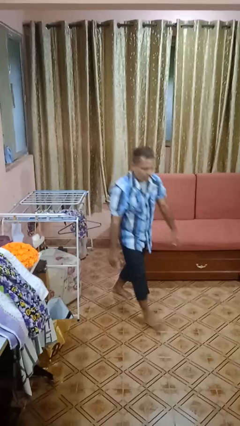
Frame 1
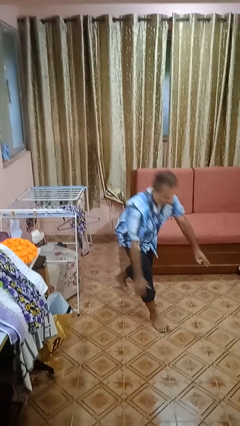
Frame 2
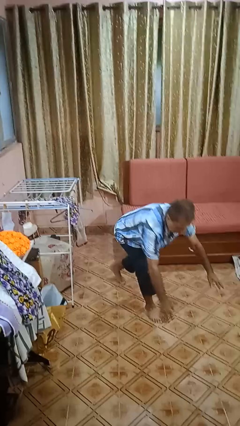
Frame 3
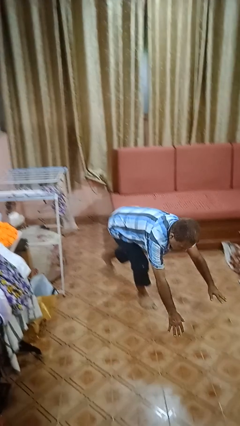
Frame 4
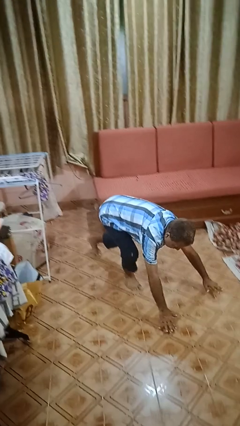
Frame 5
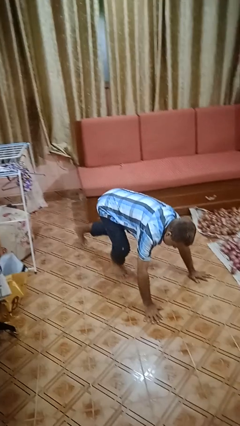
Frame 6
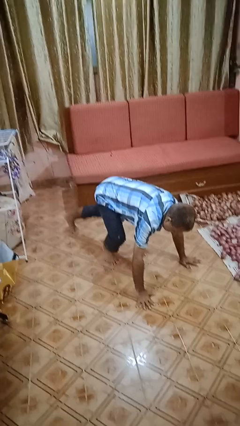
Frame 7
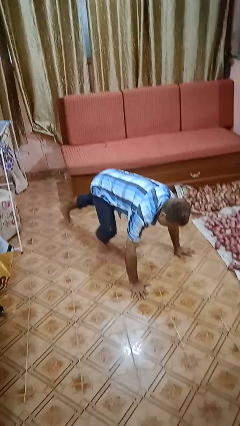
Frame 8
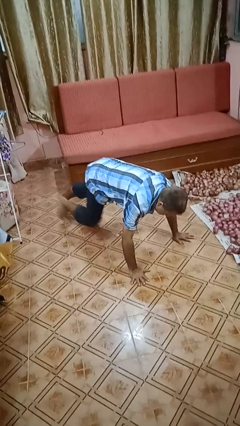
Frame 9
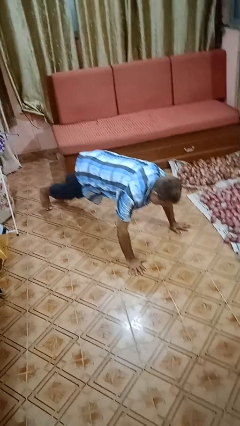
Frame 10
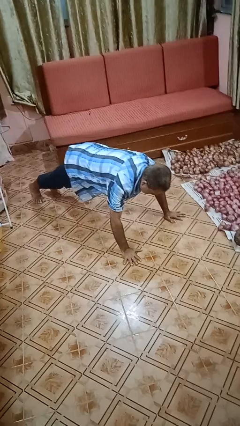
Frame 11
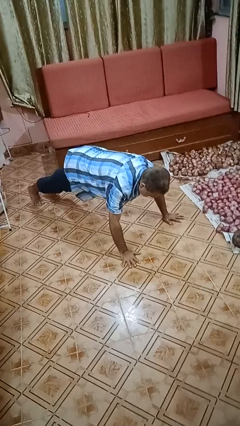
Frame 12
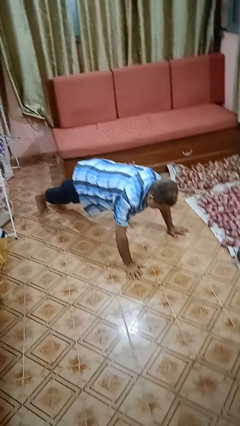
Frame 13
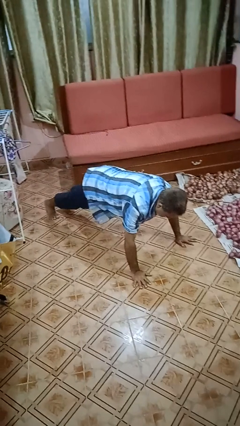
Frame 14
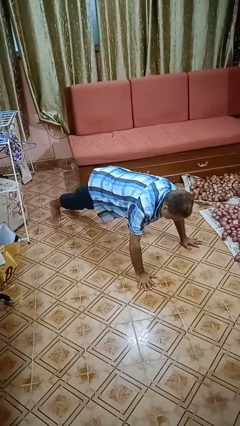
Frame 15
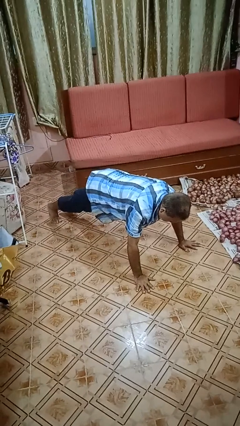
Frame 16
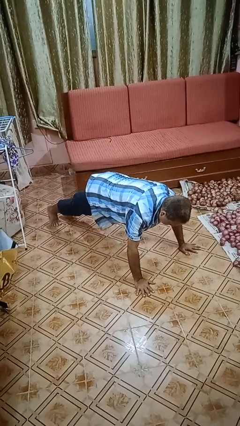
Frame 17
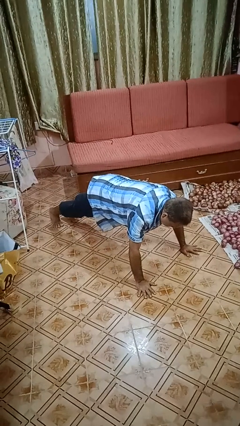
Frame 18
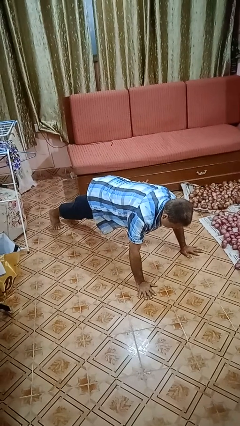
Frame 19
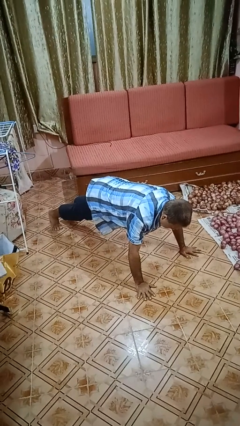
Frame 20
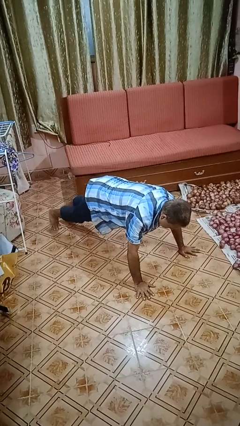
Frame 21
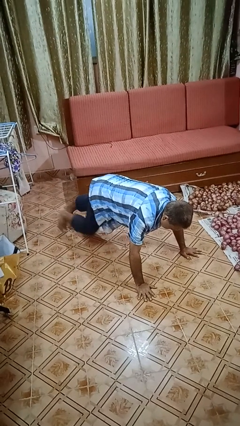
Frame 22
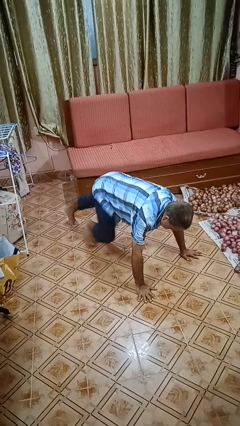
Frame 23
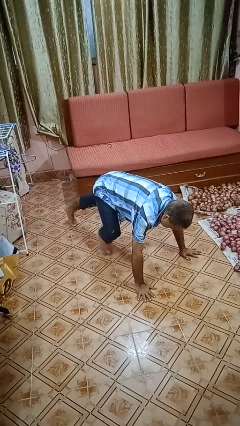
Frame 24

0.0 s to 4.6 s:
person exercises with plank

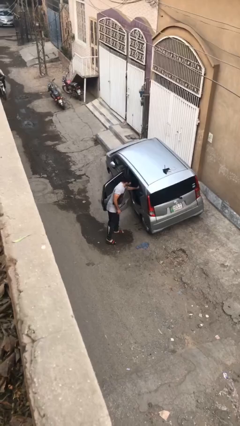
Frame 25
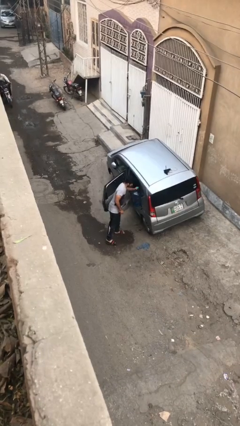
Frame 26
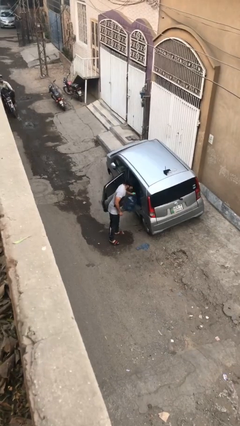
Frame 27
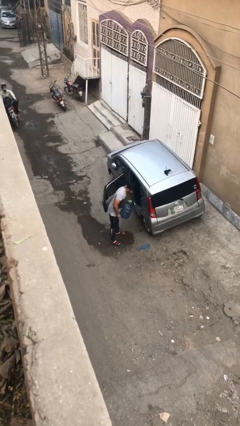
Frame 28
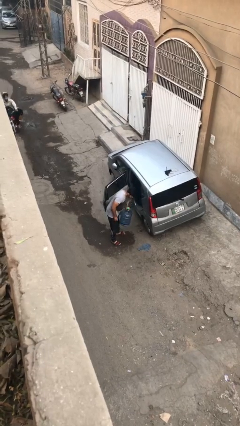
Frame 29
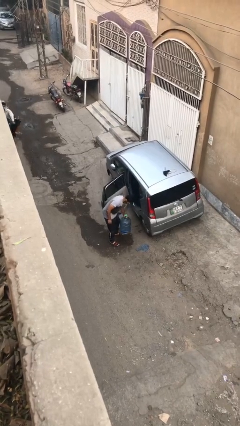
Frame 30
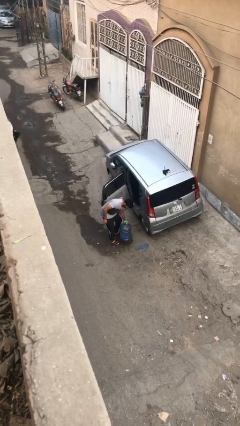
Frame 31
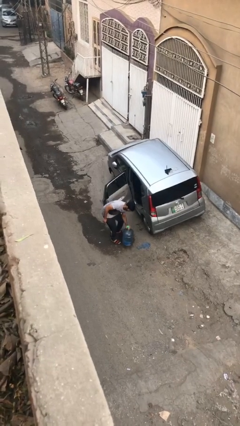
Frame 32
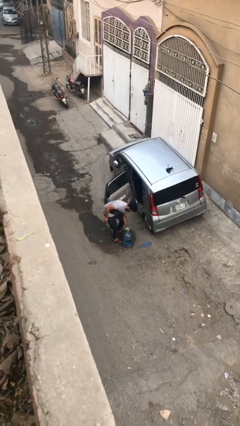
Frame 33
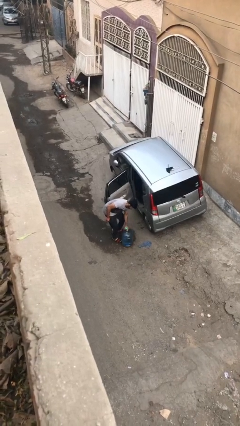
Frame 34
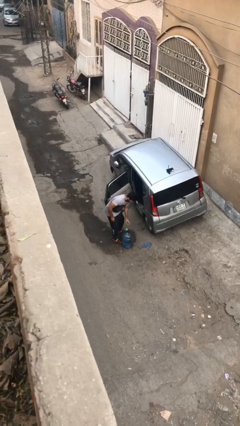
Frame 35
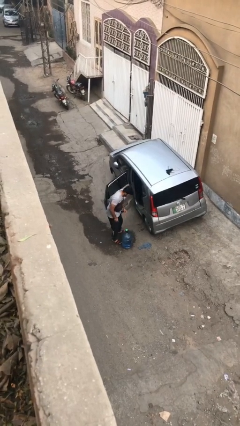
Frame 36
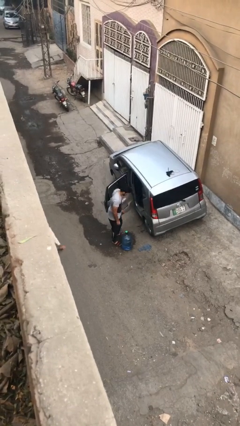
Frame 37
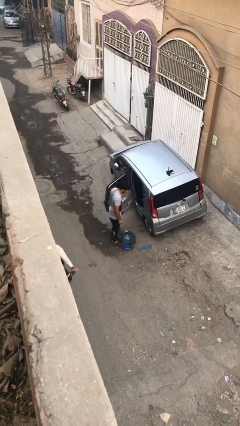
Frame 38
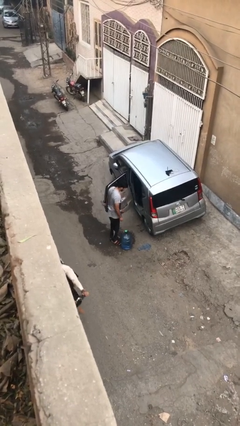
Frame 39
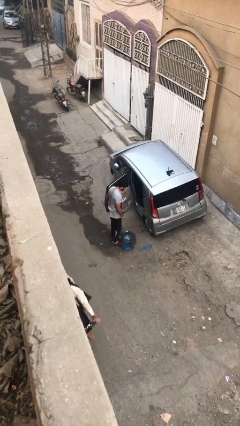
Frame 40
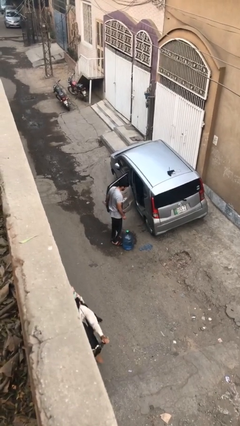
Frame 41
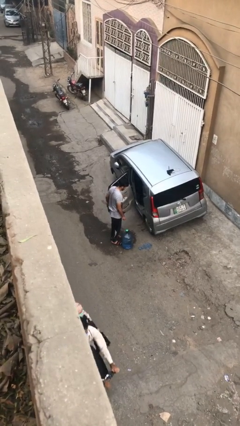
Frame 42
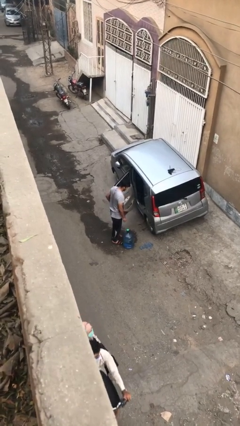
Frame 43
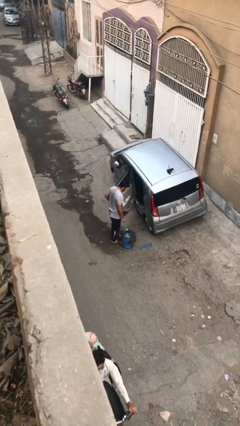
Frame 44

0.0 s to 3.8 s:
person unloads car

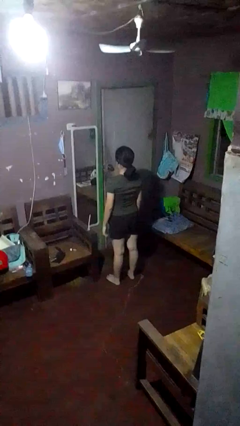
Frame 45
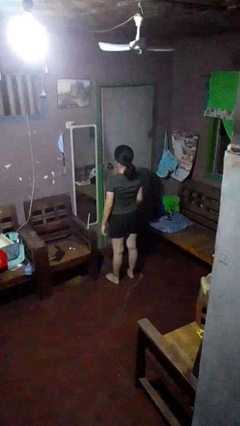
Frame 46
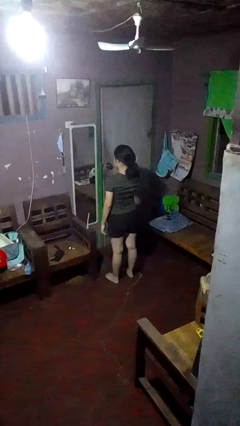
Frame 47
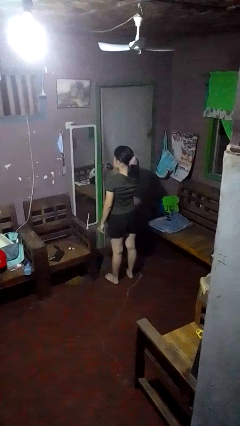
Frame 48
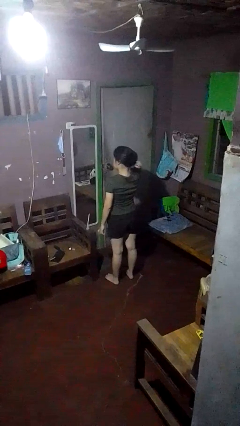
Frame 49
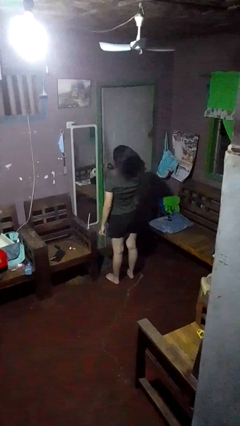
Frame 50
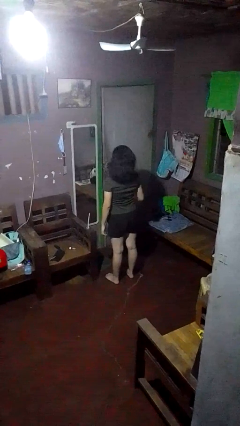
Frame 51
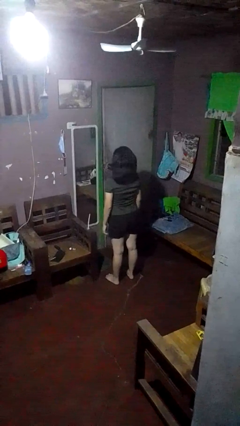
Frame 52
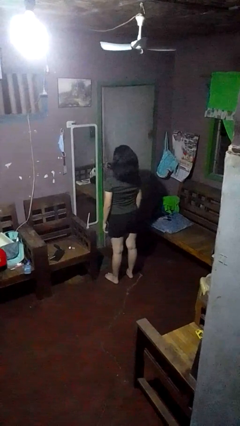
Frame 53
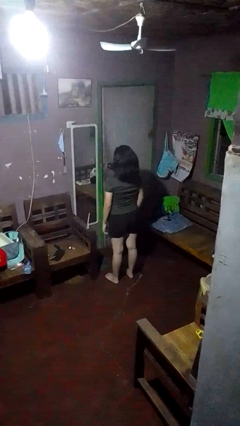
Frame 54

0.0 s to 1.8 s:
person takes off hairtie

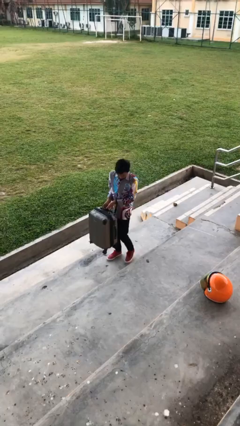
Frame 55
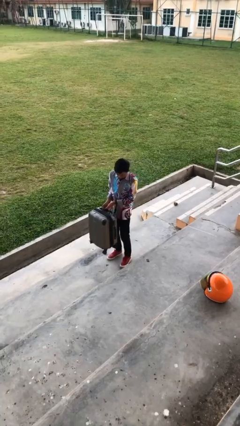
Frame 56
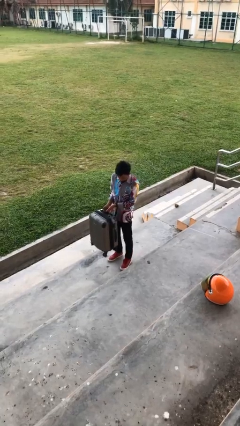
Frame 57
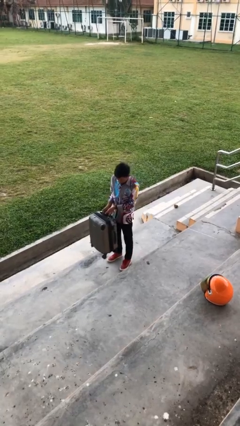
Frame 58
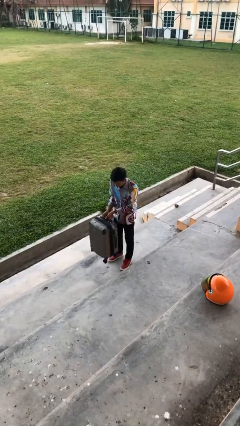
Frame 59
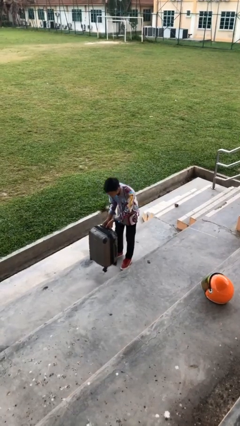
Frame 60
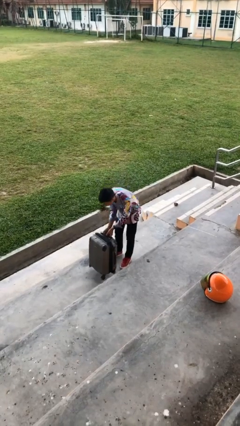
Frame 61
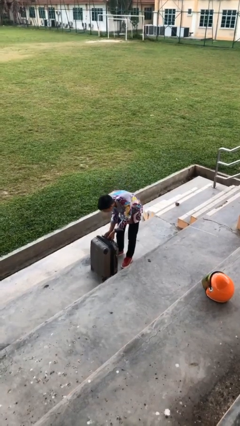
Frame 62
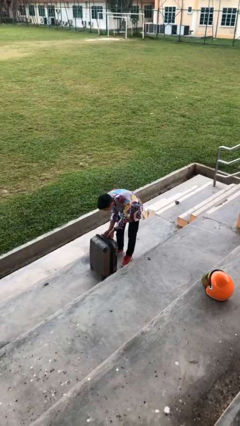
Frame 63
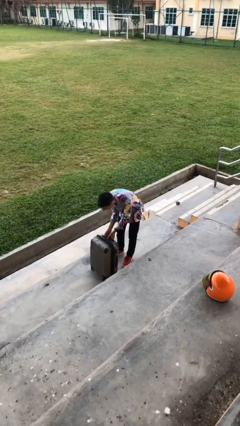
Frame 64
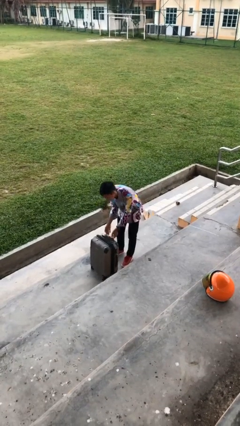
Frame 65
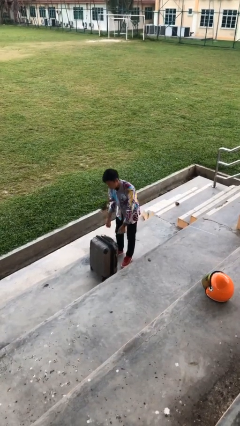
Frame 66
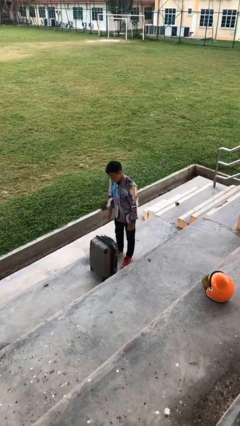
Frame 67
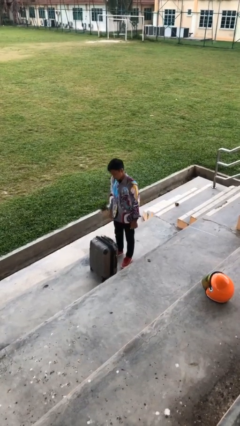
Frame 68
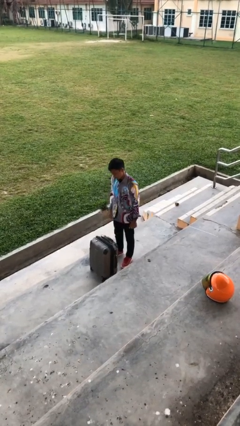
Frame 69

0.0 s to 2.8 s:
person puts down object on floor

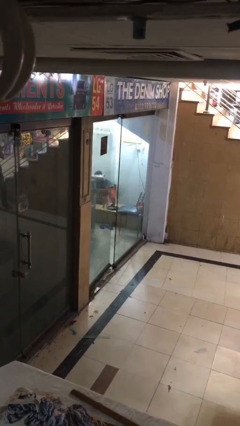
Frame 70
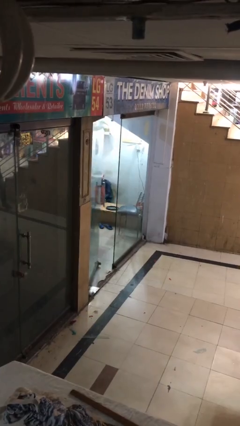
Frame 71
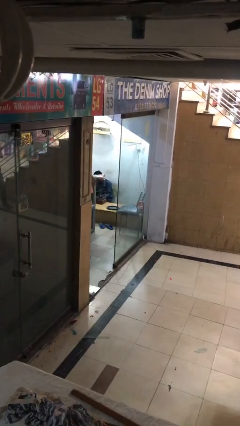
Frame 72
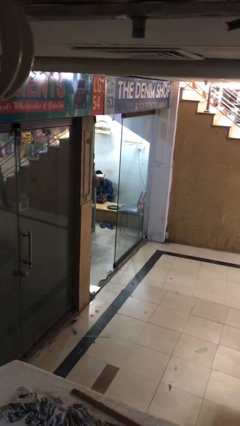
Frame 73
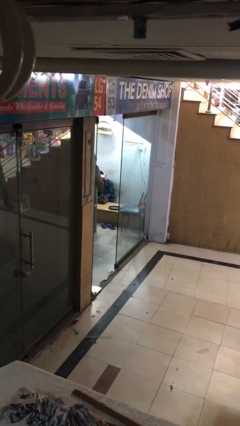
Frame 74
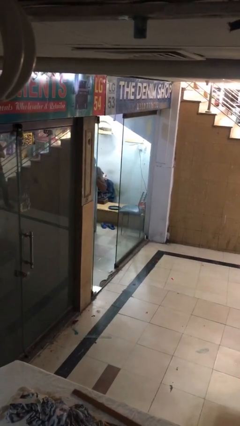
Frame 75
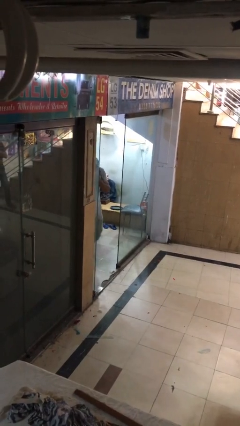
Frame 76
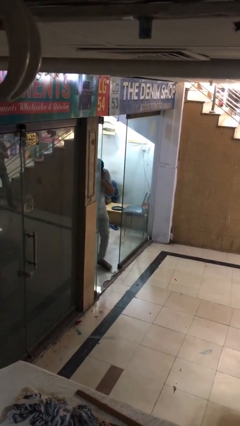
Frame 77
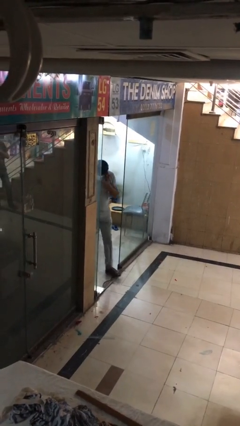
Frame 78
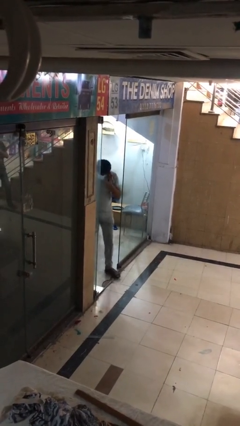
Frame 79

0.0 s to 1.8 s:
person opens facility door

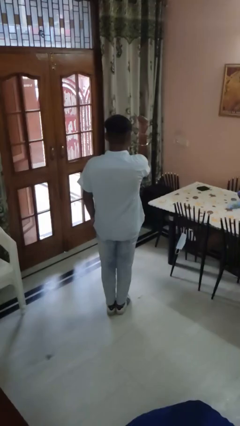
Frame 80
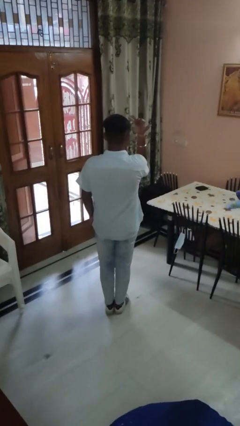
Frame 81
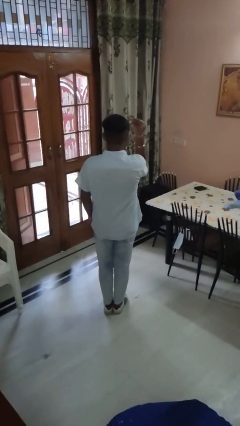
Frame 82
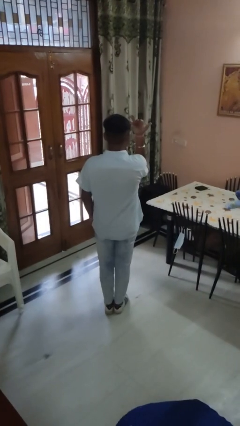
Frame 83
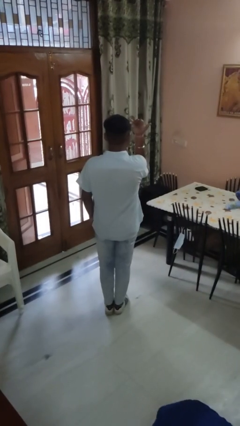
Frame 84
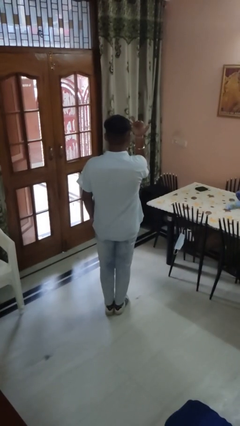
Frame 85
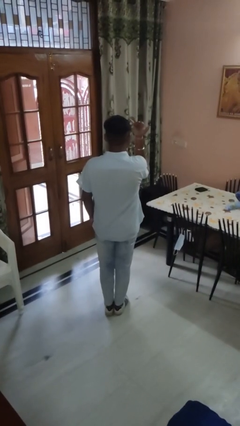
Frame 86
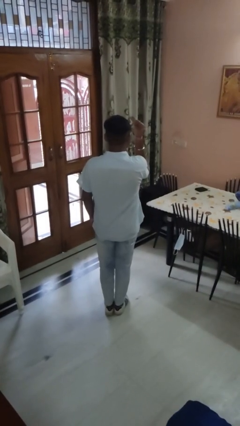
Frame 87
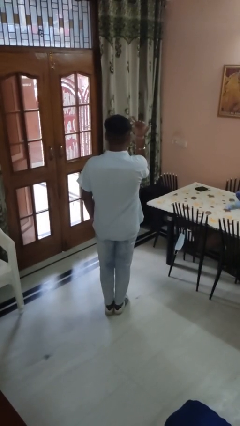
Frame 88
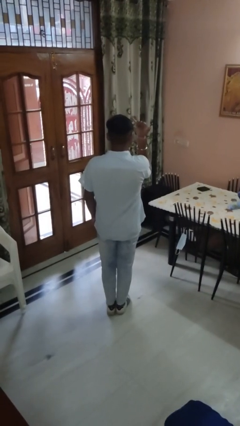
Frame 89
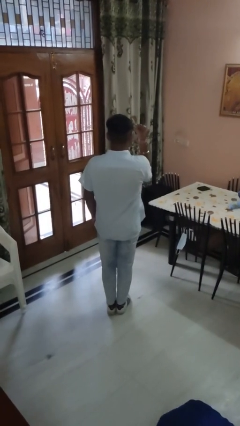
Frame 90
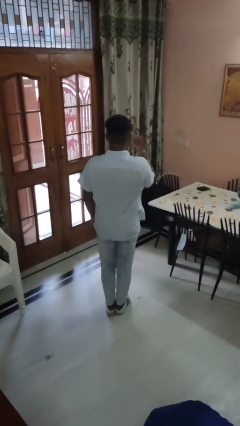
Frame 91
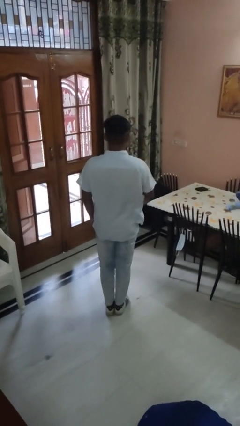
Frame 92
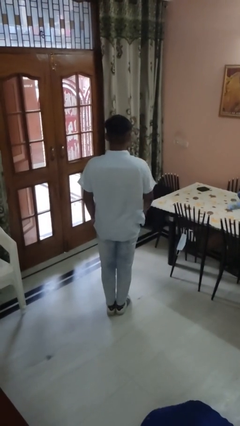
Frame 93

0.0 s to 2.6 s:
person gestures hang loose

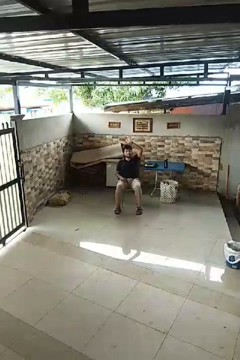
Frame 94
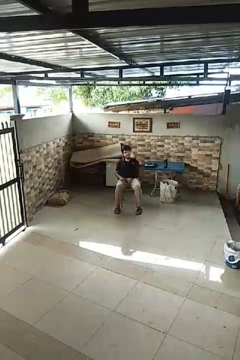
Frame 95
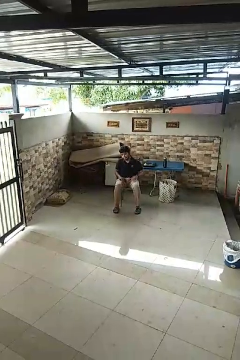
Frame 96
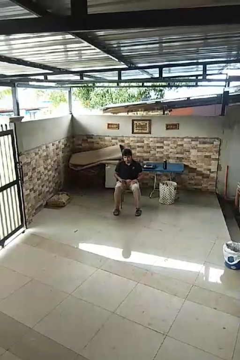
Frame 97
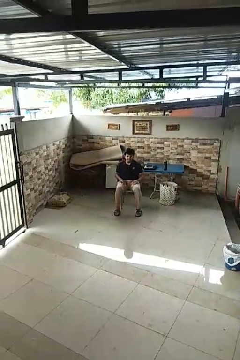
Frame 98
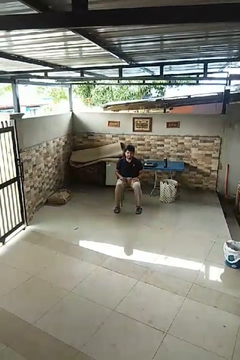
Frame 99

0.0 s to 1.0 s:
person gestures lower hand
